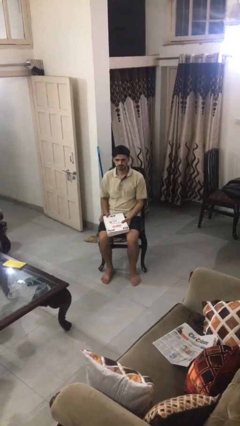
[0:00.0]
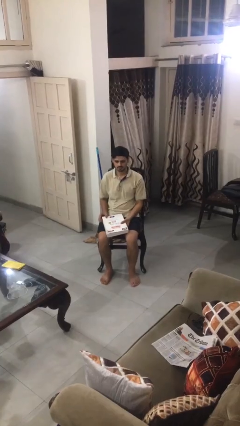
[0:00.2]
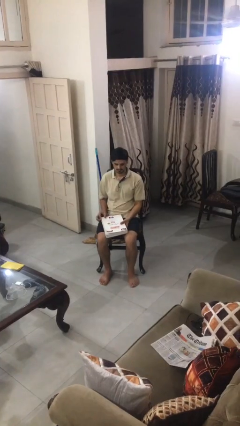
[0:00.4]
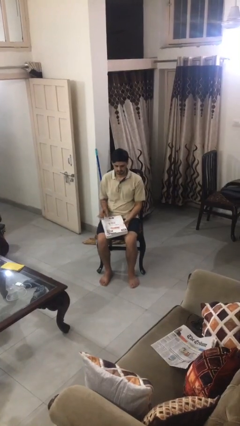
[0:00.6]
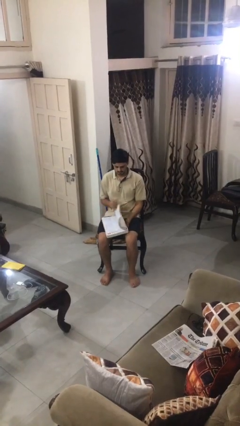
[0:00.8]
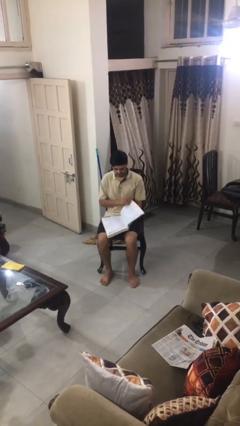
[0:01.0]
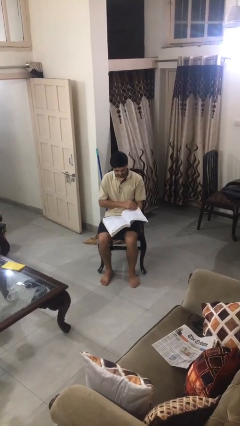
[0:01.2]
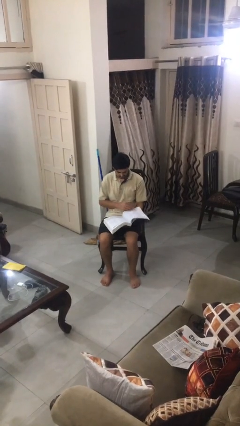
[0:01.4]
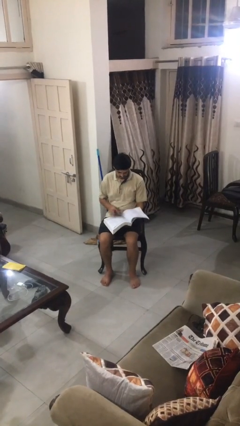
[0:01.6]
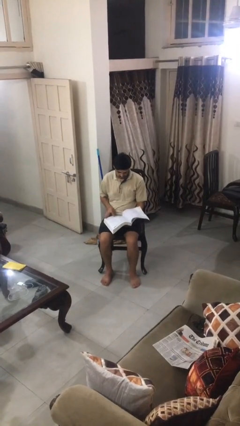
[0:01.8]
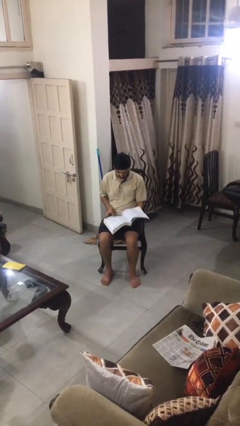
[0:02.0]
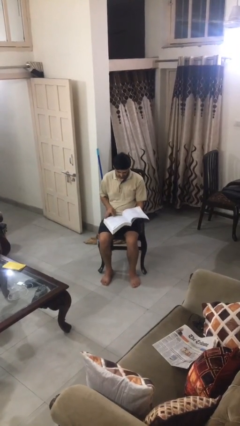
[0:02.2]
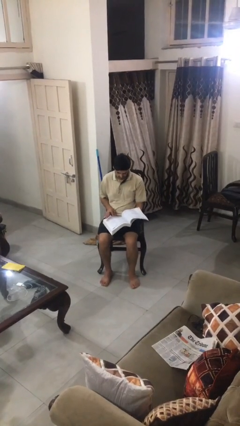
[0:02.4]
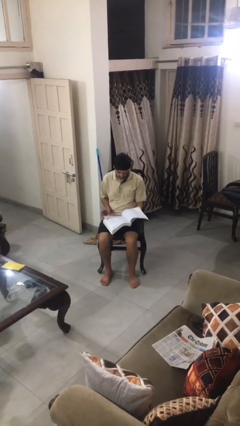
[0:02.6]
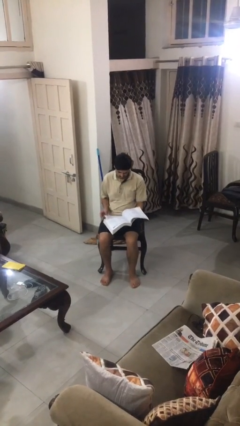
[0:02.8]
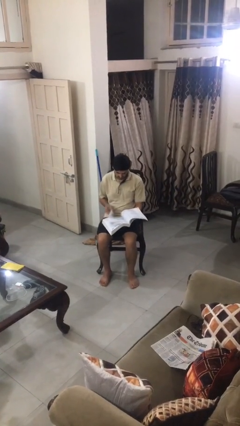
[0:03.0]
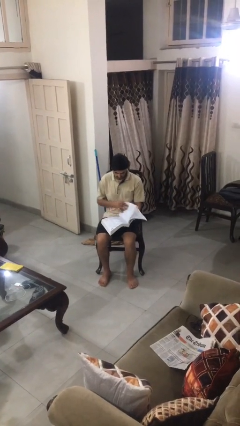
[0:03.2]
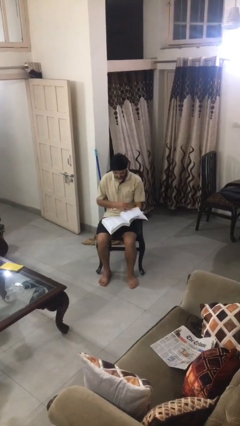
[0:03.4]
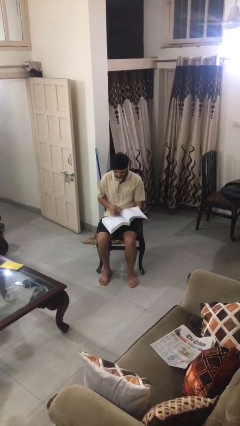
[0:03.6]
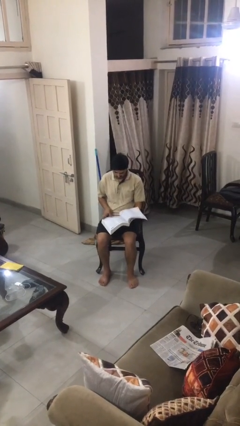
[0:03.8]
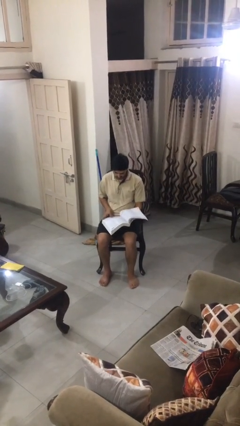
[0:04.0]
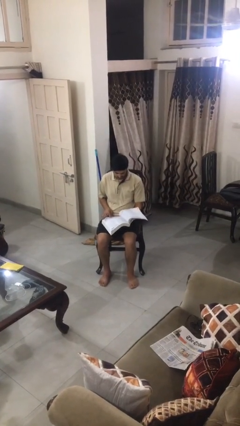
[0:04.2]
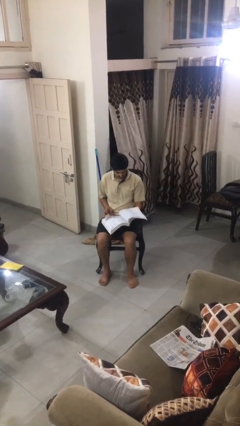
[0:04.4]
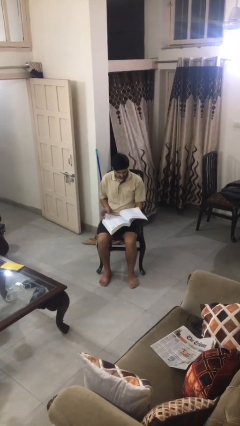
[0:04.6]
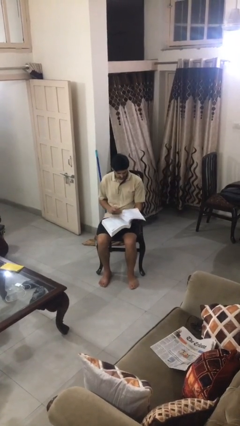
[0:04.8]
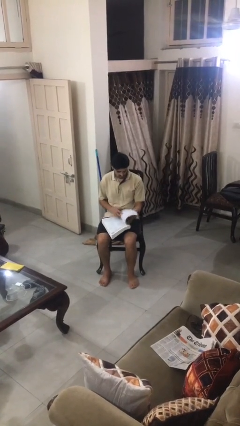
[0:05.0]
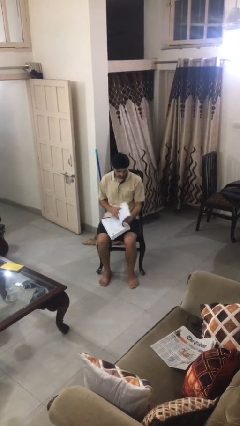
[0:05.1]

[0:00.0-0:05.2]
person reads book

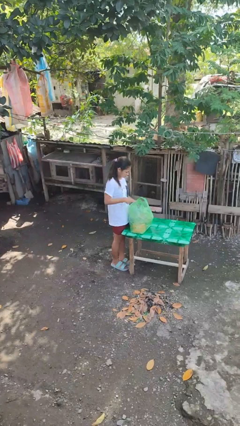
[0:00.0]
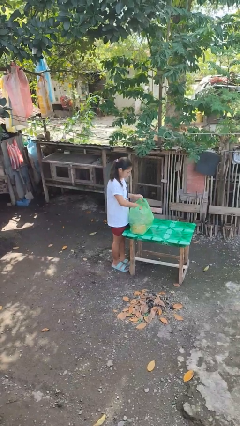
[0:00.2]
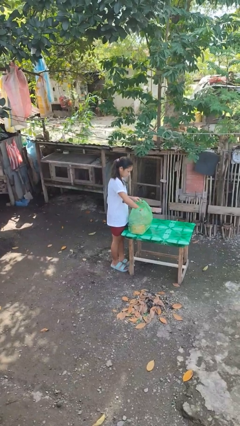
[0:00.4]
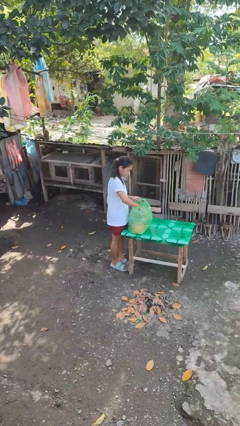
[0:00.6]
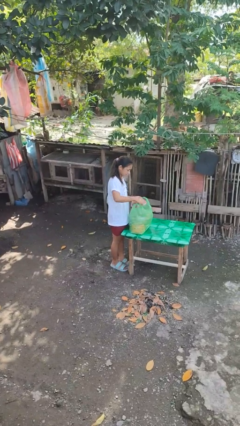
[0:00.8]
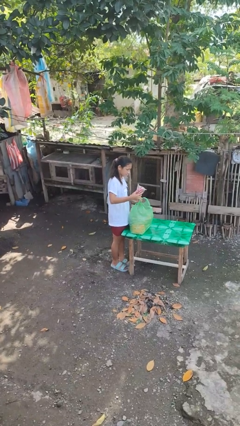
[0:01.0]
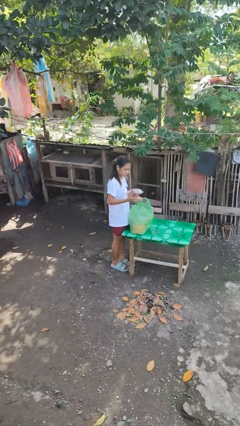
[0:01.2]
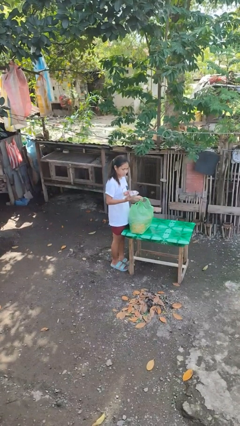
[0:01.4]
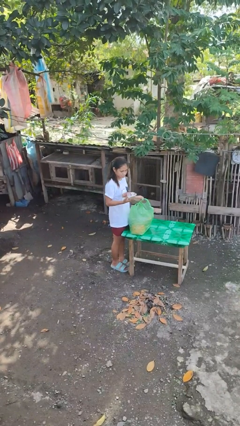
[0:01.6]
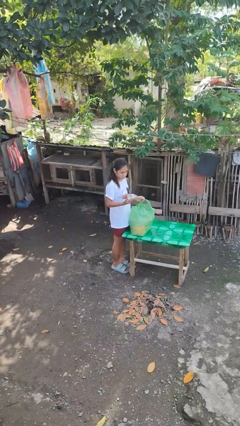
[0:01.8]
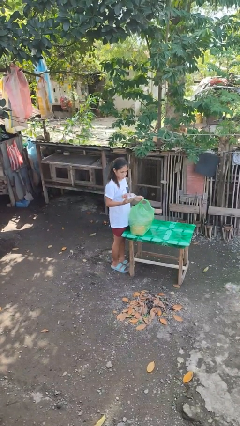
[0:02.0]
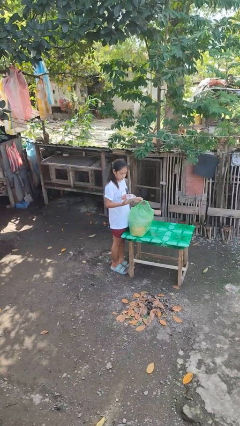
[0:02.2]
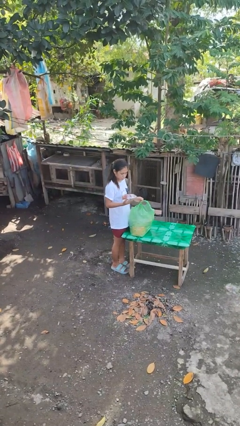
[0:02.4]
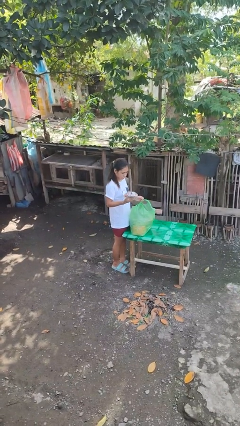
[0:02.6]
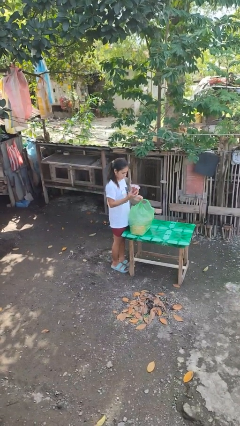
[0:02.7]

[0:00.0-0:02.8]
person takes object from bag

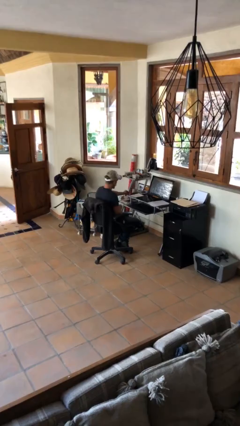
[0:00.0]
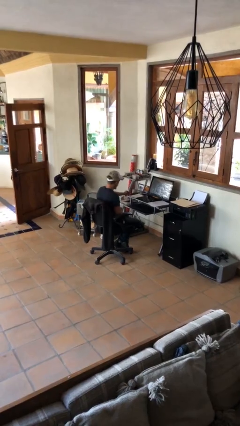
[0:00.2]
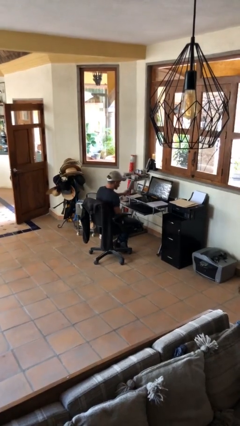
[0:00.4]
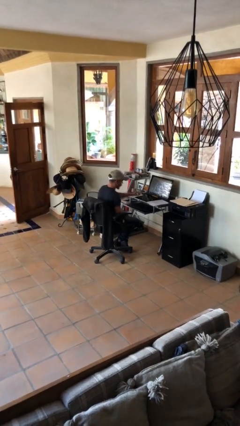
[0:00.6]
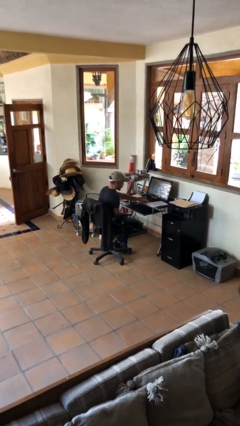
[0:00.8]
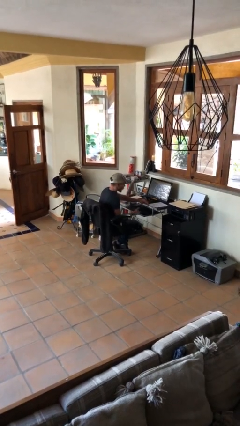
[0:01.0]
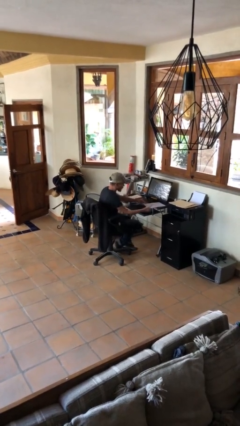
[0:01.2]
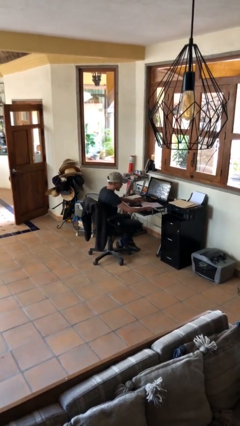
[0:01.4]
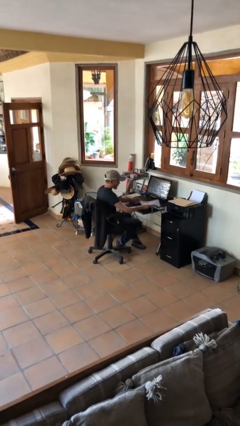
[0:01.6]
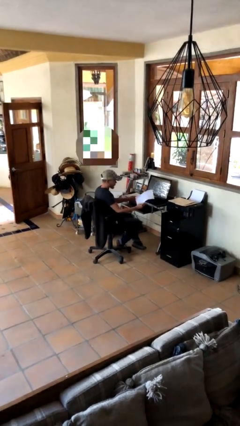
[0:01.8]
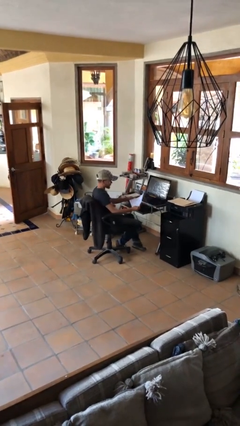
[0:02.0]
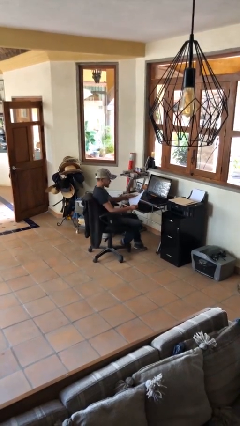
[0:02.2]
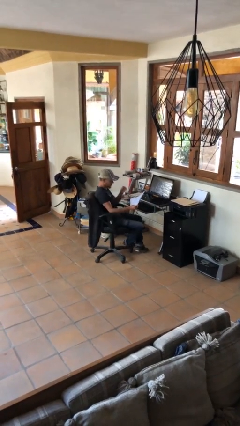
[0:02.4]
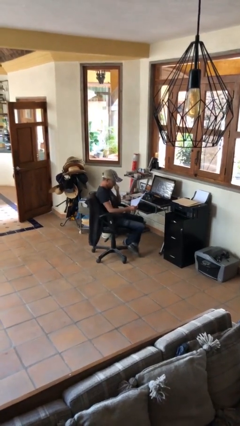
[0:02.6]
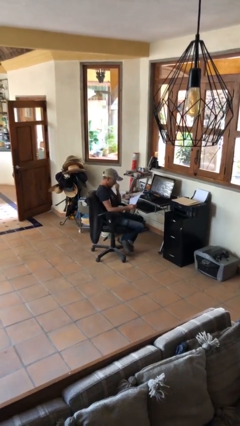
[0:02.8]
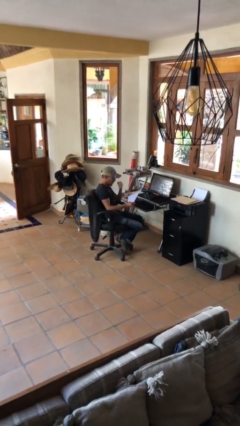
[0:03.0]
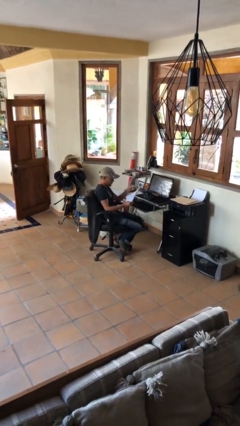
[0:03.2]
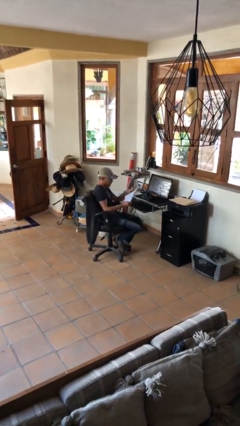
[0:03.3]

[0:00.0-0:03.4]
person picks up object from table

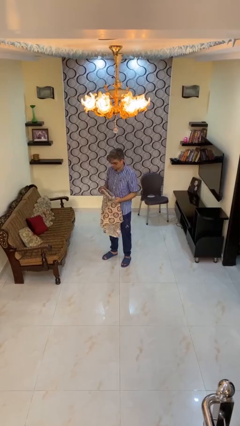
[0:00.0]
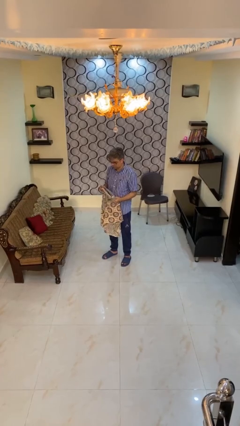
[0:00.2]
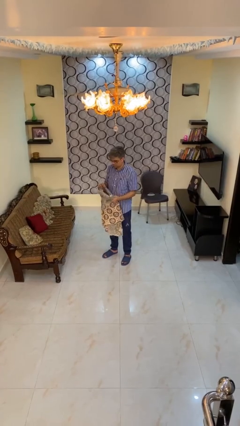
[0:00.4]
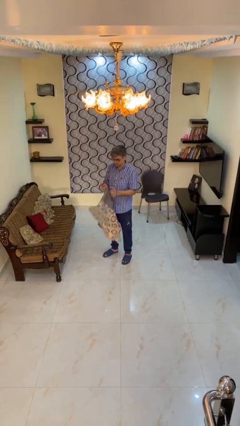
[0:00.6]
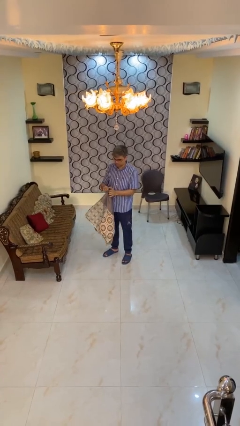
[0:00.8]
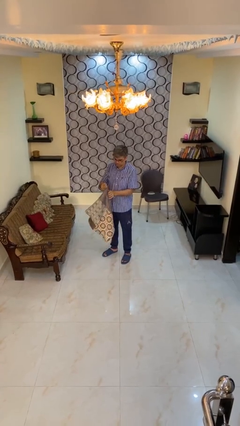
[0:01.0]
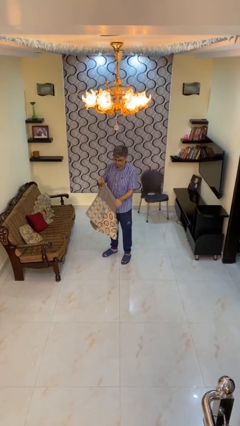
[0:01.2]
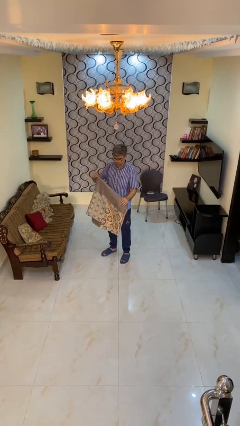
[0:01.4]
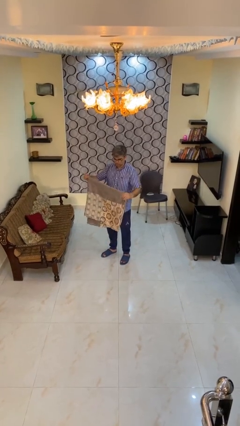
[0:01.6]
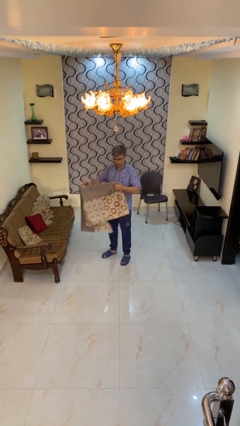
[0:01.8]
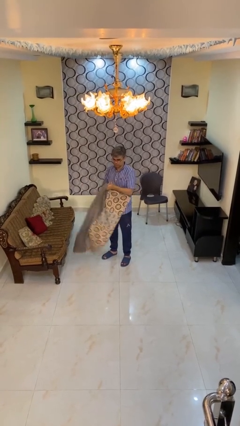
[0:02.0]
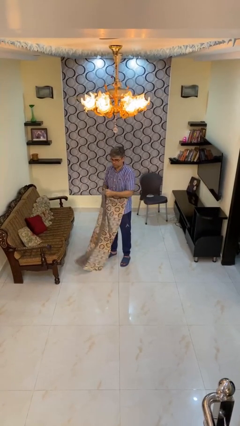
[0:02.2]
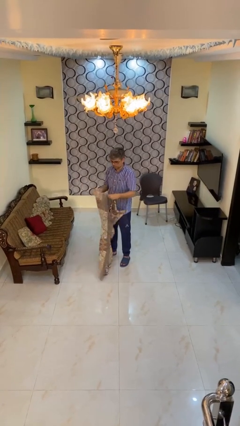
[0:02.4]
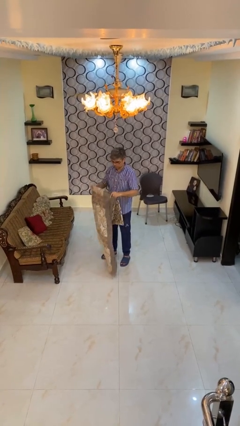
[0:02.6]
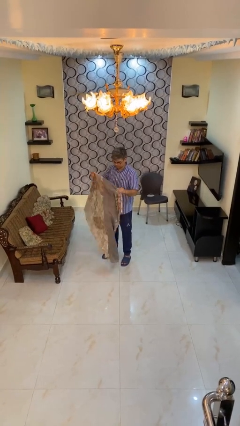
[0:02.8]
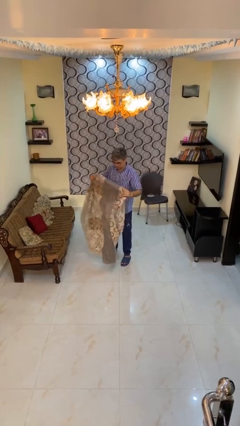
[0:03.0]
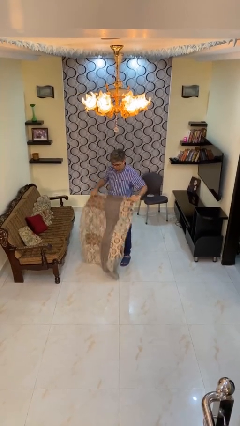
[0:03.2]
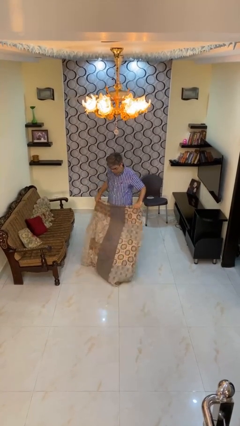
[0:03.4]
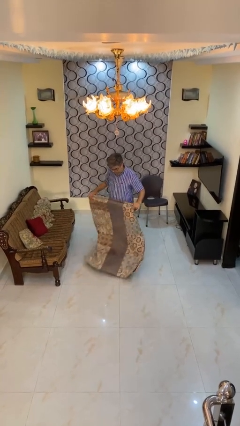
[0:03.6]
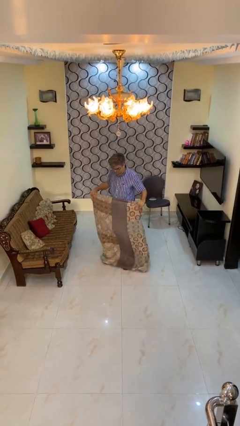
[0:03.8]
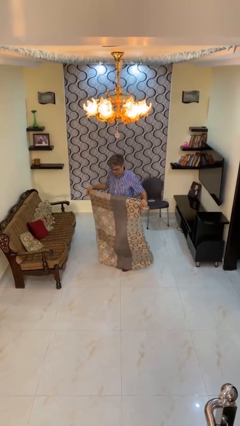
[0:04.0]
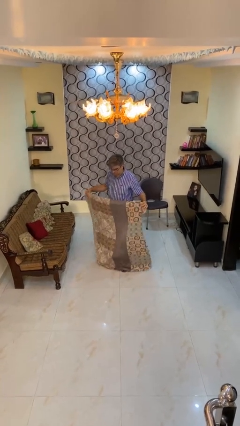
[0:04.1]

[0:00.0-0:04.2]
person unfolds blanket

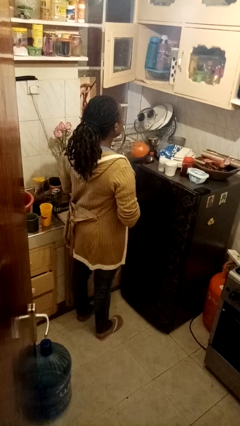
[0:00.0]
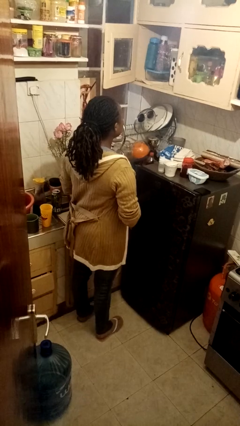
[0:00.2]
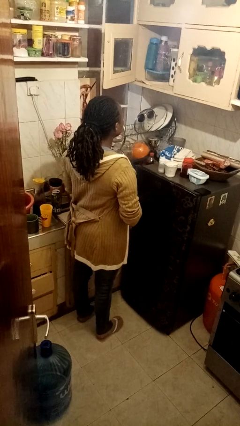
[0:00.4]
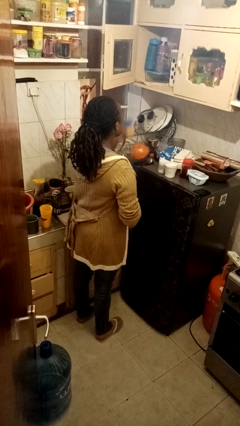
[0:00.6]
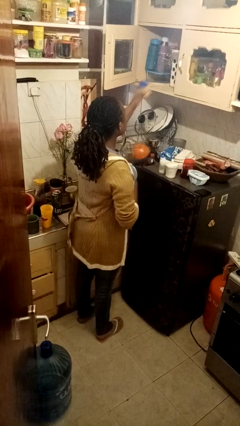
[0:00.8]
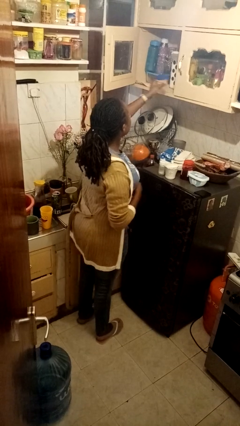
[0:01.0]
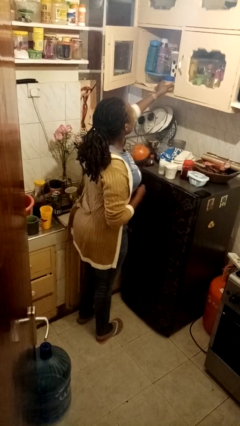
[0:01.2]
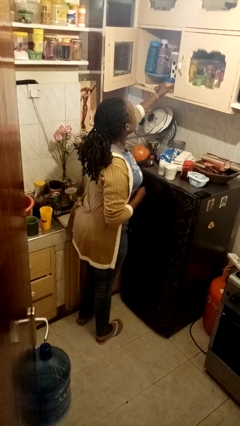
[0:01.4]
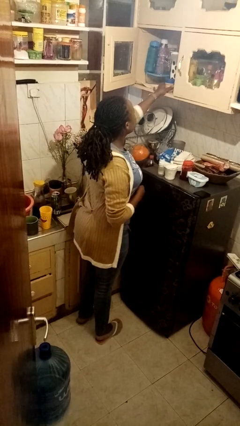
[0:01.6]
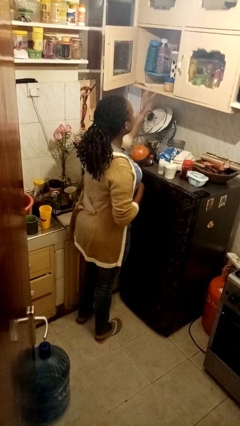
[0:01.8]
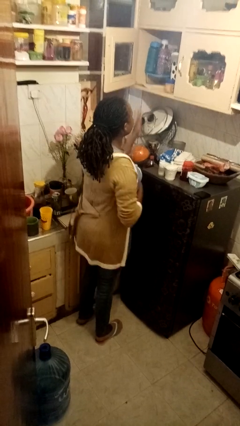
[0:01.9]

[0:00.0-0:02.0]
person puts down object into cabinet
